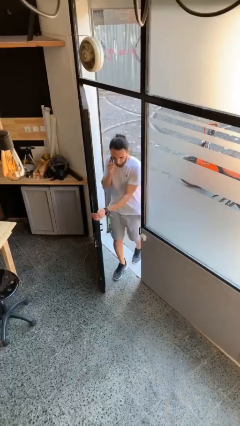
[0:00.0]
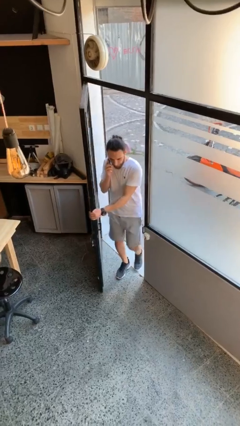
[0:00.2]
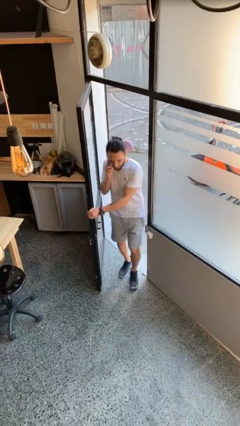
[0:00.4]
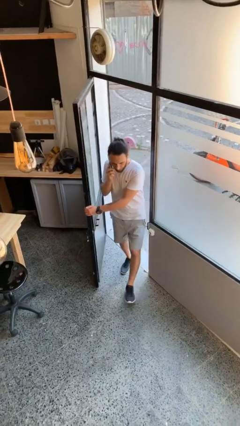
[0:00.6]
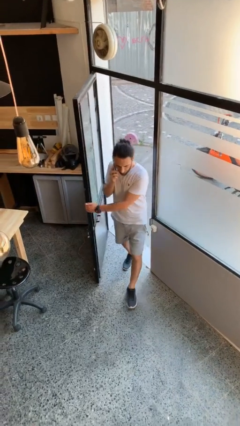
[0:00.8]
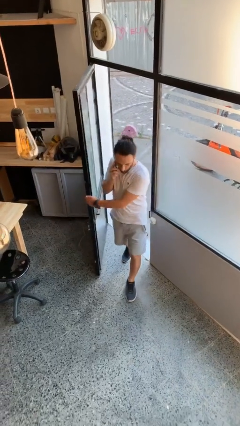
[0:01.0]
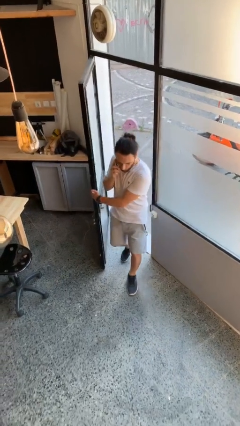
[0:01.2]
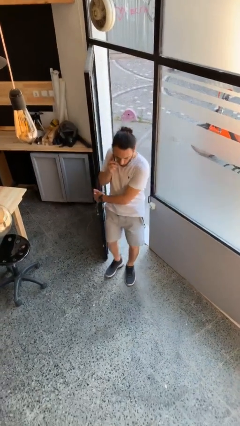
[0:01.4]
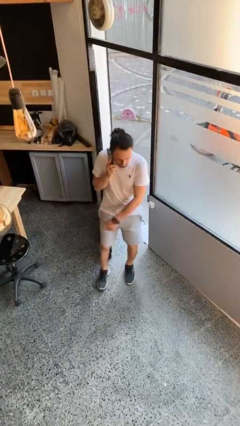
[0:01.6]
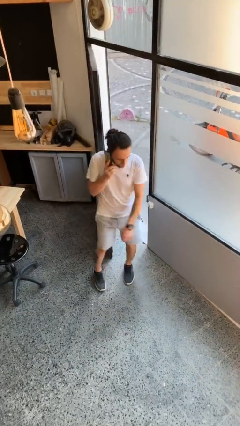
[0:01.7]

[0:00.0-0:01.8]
person enters scene through structure

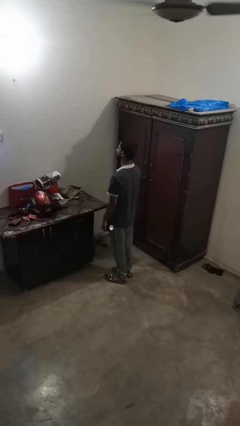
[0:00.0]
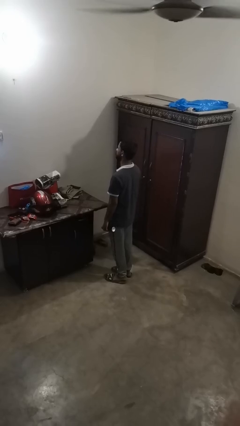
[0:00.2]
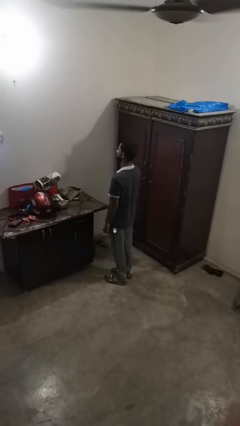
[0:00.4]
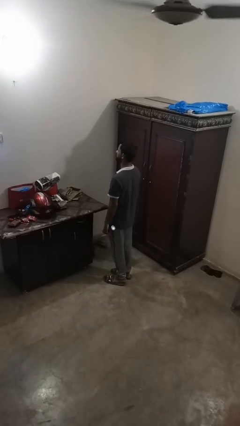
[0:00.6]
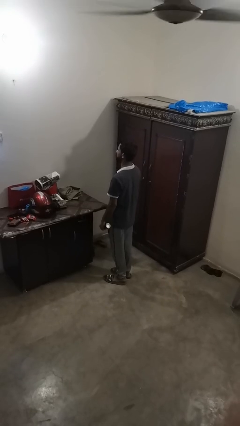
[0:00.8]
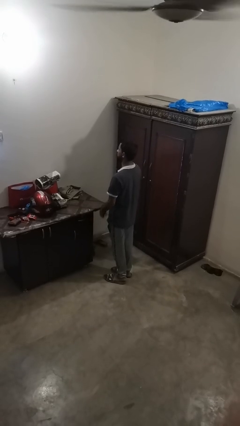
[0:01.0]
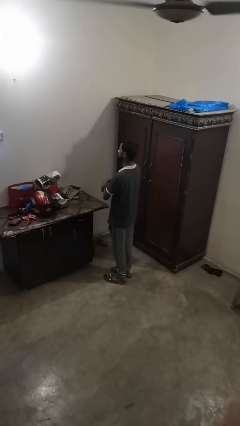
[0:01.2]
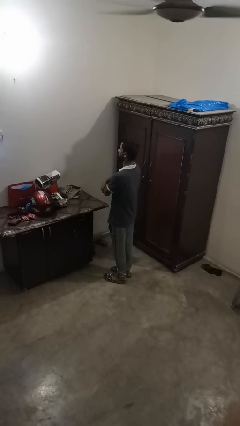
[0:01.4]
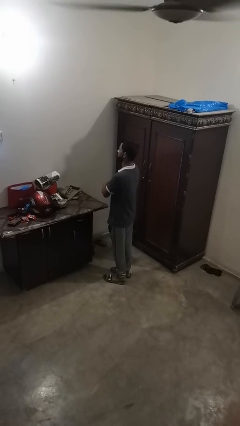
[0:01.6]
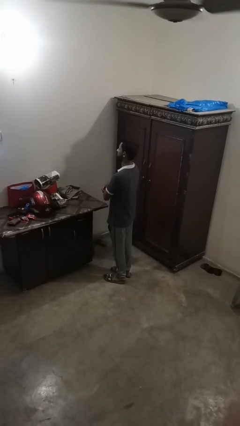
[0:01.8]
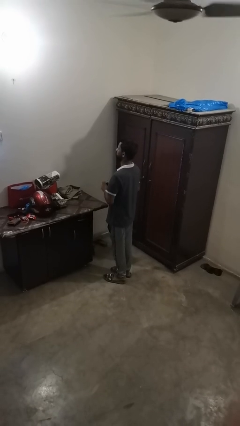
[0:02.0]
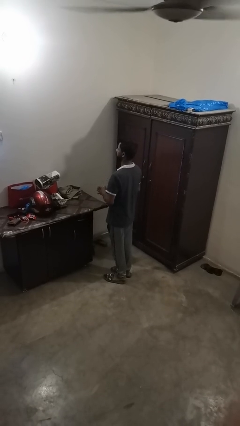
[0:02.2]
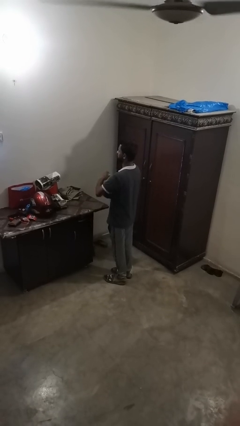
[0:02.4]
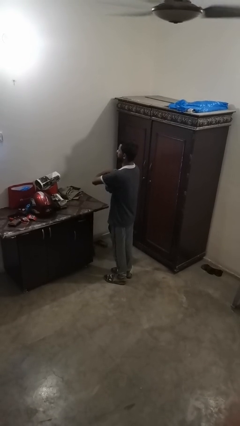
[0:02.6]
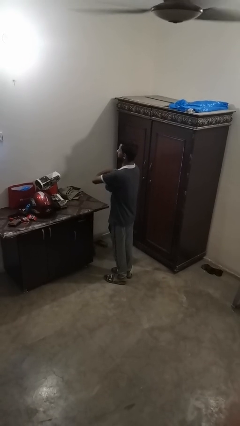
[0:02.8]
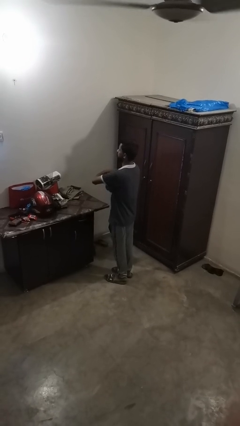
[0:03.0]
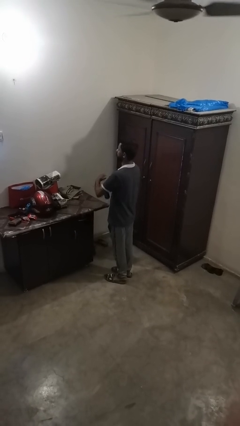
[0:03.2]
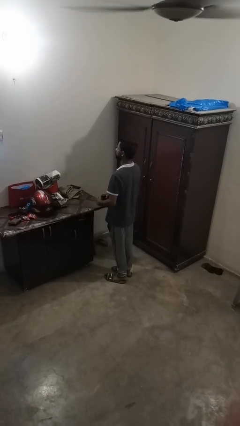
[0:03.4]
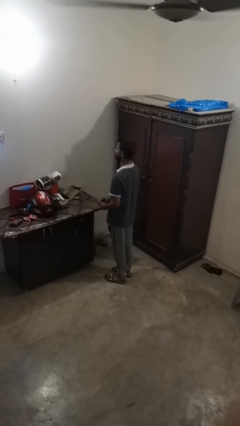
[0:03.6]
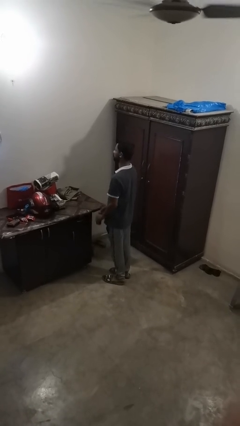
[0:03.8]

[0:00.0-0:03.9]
person applies deodorant

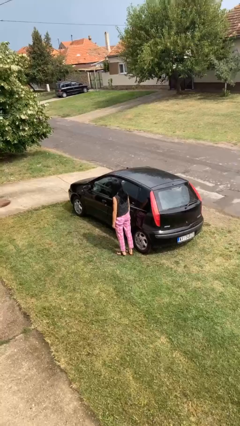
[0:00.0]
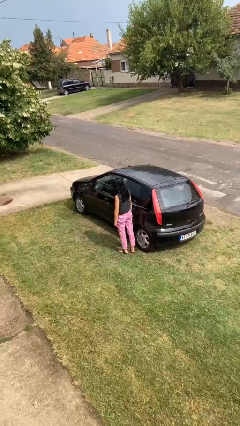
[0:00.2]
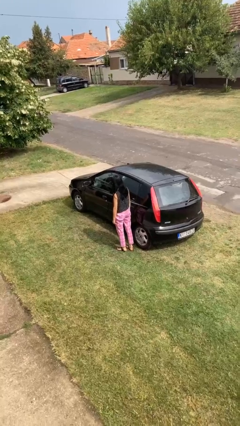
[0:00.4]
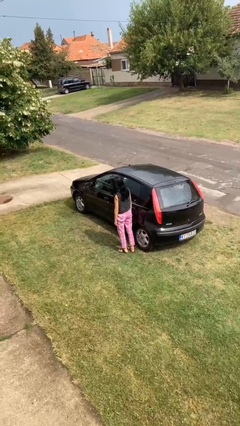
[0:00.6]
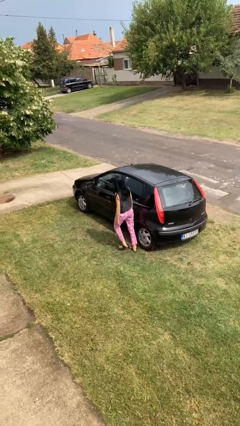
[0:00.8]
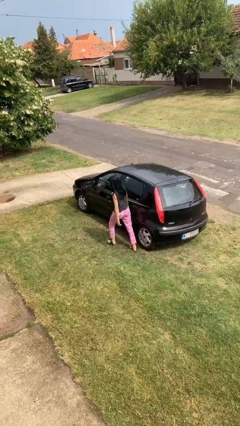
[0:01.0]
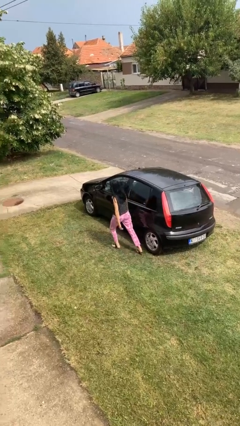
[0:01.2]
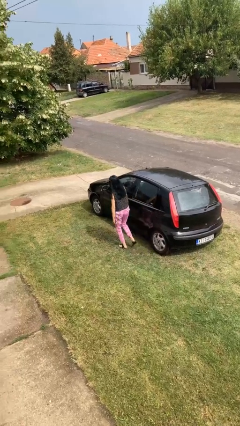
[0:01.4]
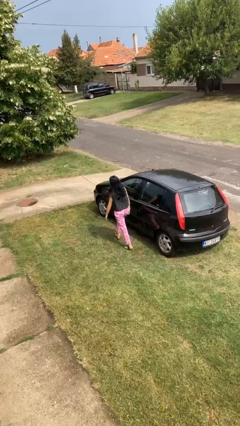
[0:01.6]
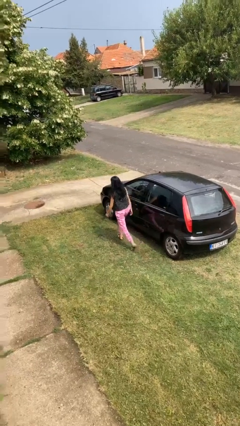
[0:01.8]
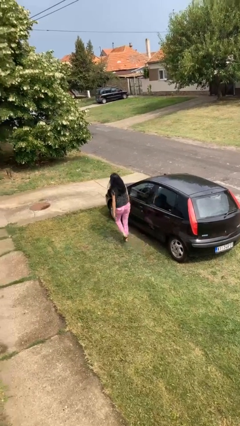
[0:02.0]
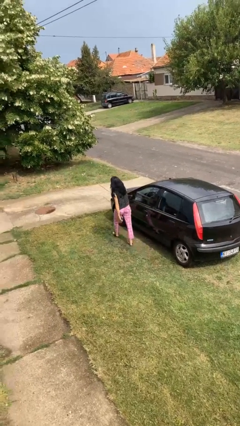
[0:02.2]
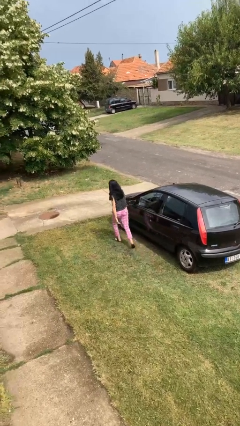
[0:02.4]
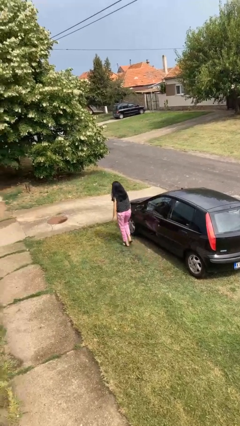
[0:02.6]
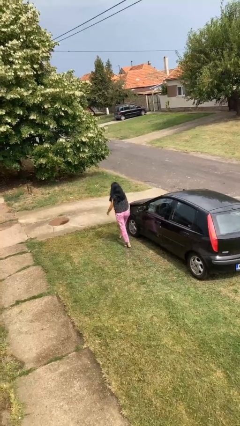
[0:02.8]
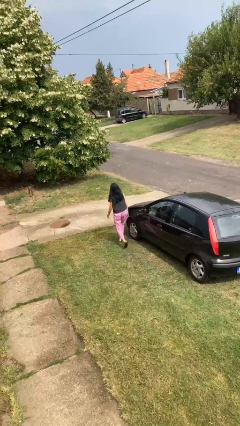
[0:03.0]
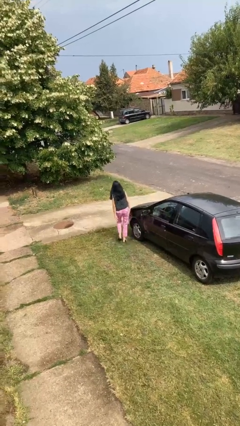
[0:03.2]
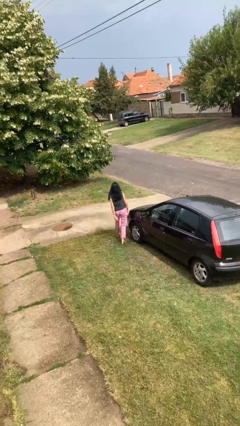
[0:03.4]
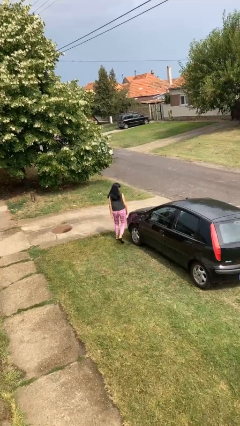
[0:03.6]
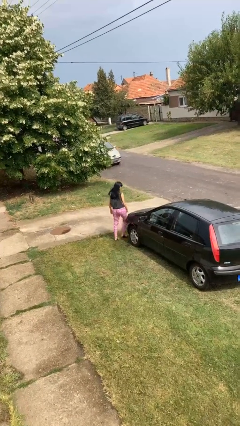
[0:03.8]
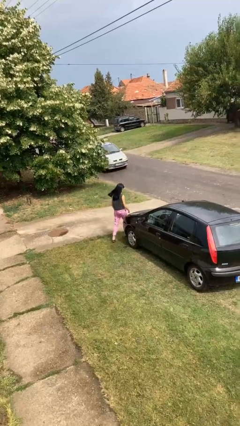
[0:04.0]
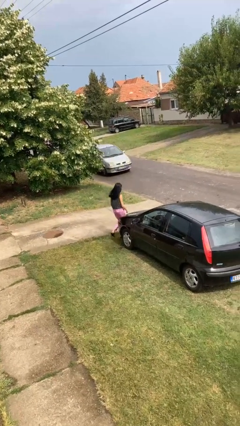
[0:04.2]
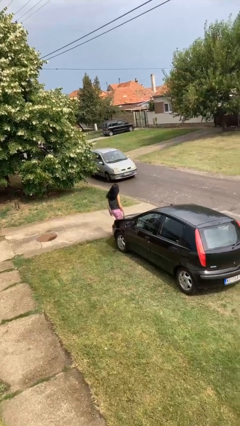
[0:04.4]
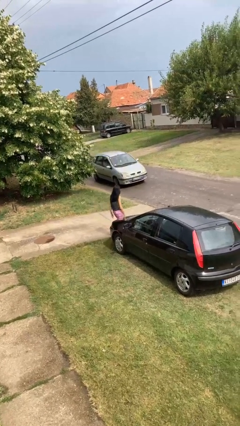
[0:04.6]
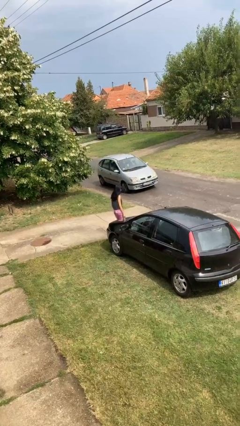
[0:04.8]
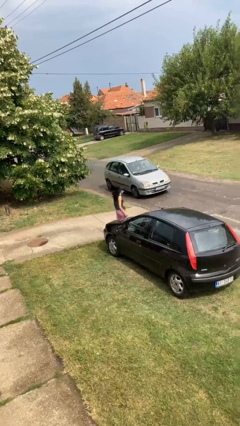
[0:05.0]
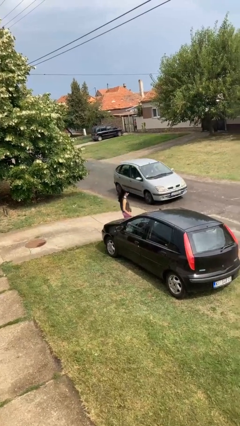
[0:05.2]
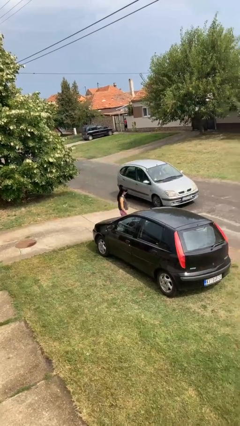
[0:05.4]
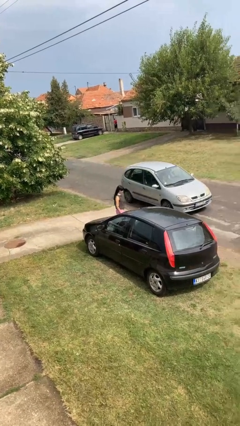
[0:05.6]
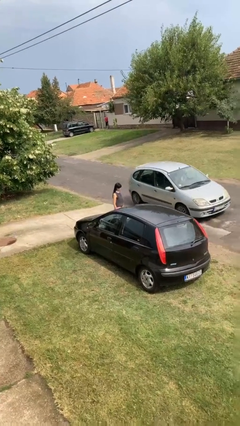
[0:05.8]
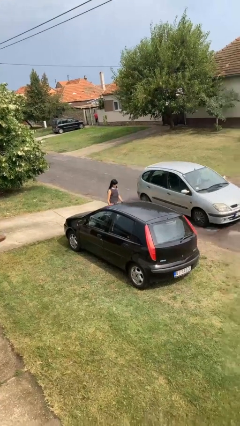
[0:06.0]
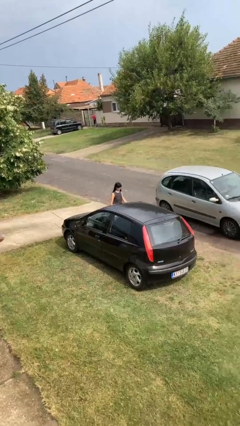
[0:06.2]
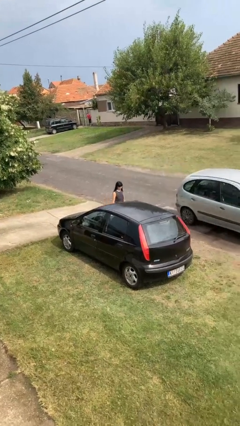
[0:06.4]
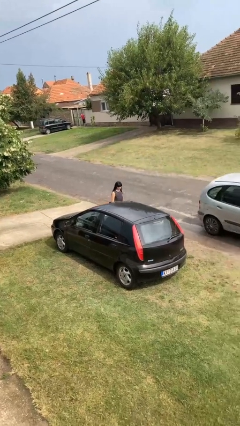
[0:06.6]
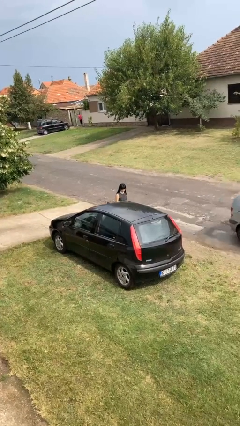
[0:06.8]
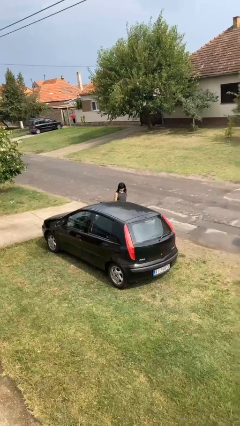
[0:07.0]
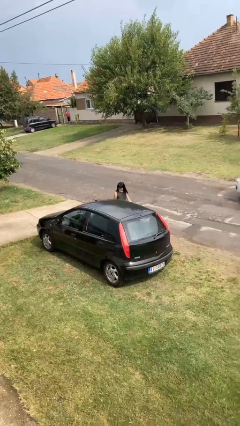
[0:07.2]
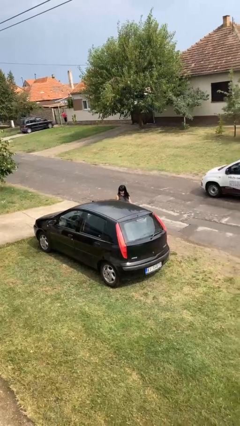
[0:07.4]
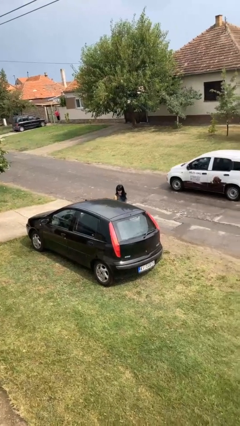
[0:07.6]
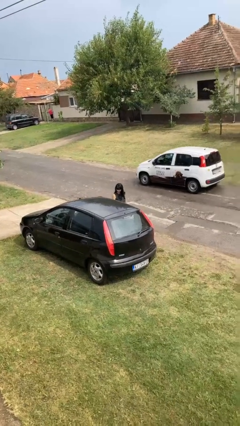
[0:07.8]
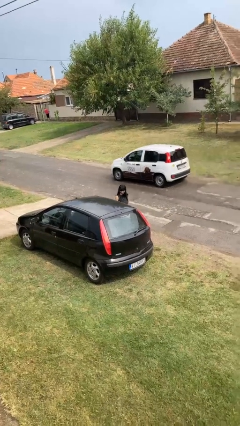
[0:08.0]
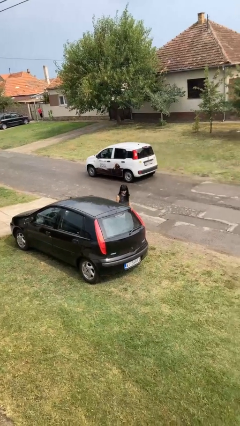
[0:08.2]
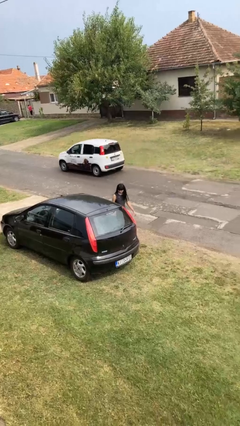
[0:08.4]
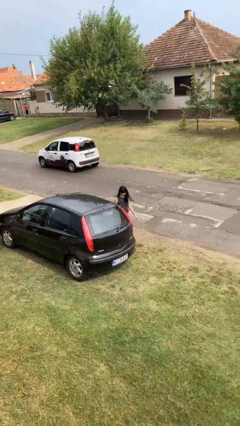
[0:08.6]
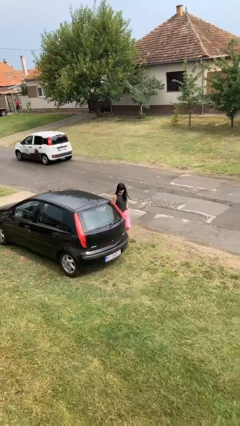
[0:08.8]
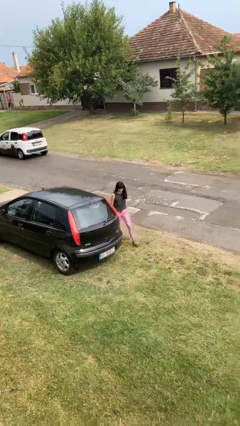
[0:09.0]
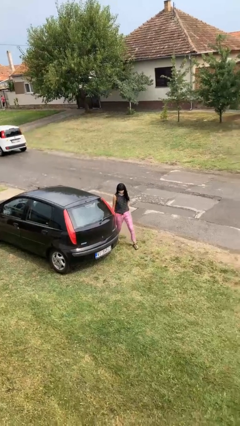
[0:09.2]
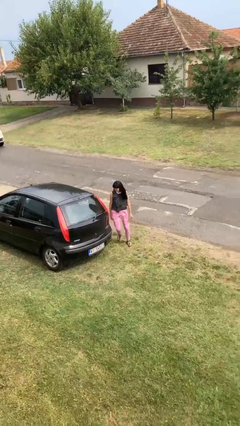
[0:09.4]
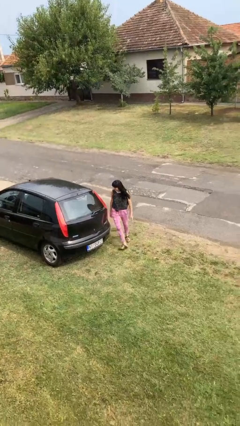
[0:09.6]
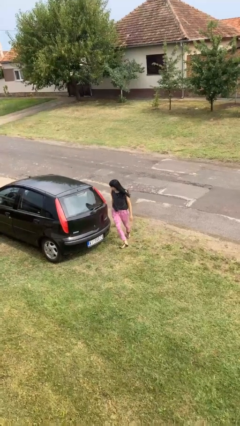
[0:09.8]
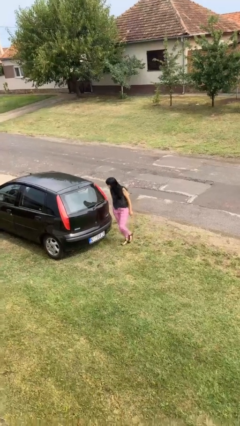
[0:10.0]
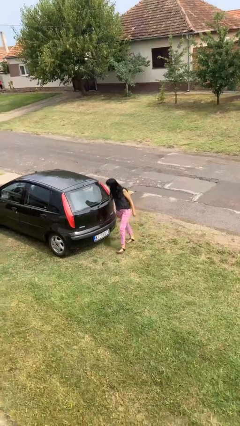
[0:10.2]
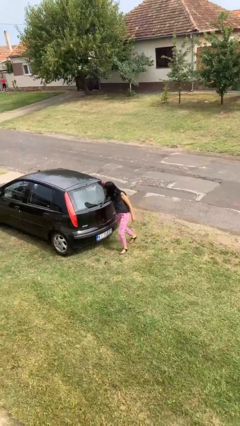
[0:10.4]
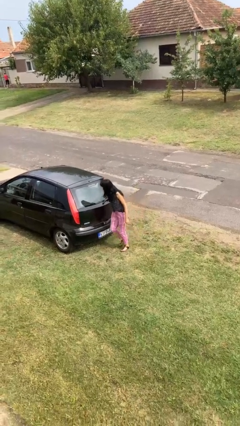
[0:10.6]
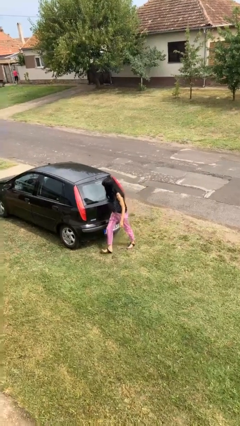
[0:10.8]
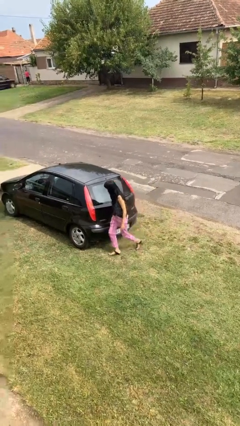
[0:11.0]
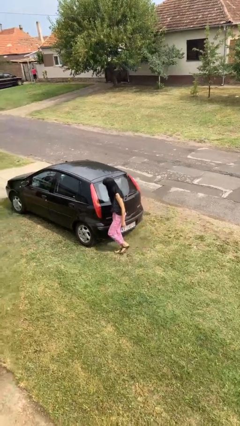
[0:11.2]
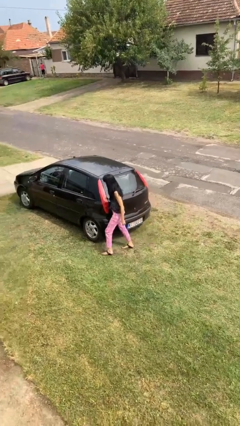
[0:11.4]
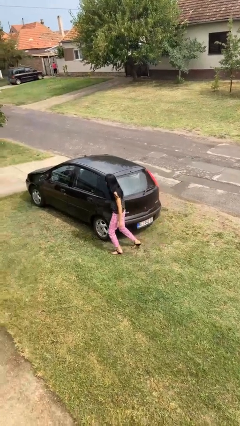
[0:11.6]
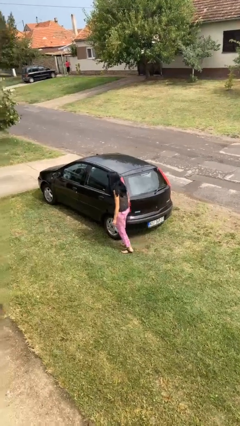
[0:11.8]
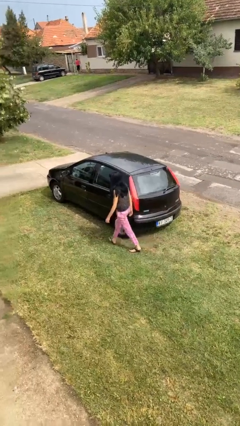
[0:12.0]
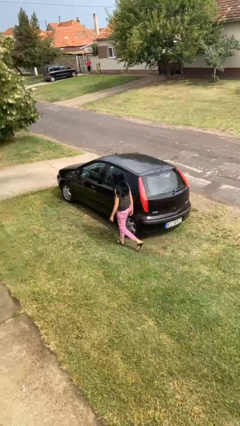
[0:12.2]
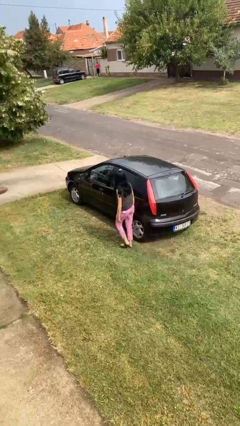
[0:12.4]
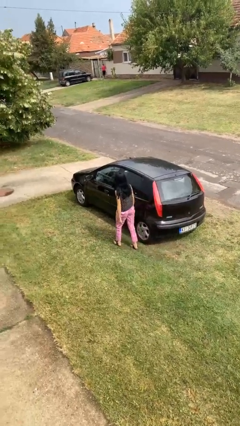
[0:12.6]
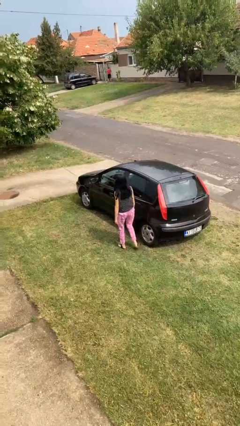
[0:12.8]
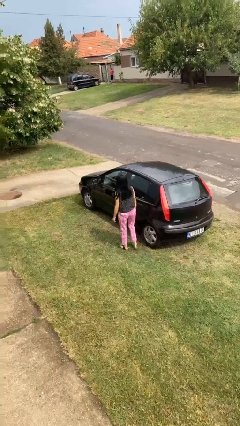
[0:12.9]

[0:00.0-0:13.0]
person walks around car
